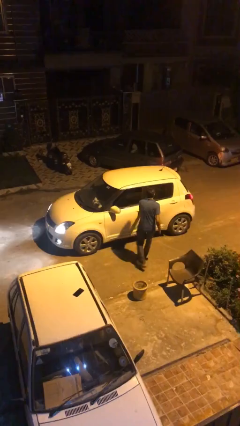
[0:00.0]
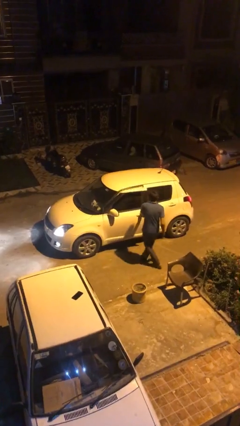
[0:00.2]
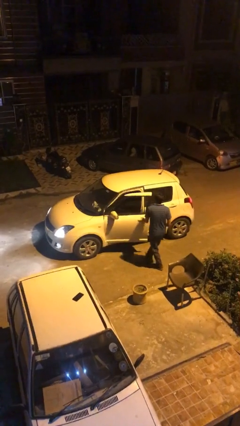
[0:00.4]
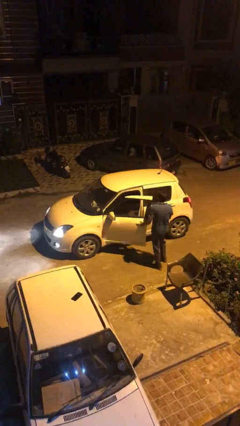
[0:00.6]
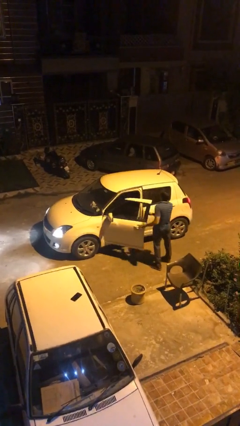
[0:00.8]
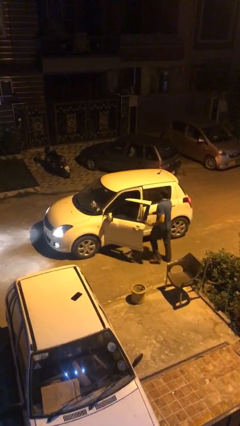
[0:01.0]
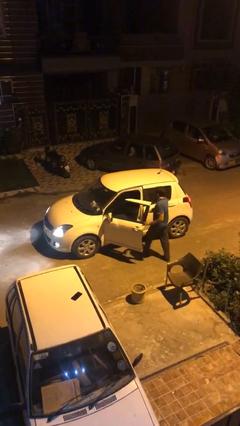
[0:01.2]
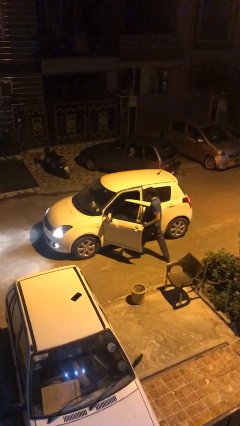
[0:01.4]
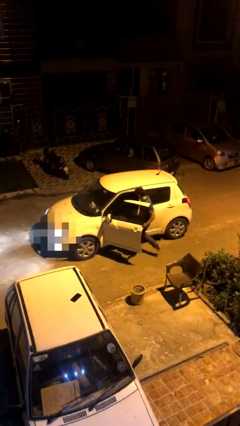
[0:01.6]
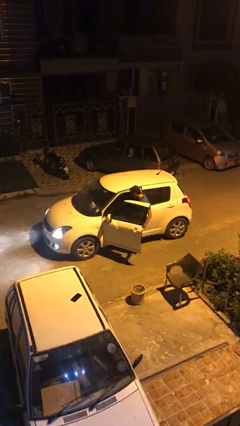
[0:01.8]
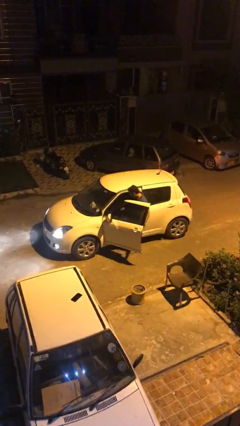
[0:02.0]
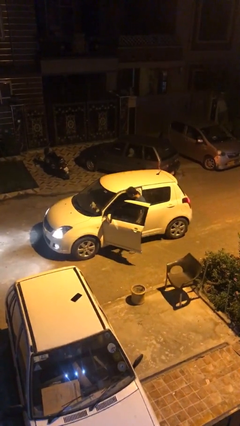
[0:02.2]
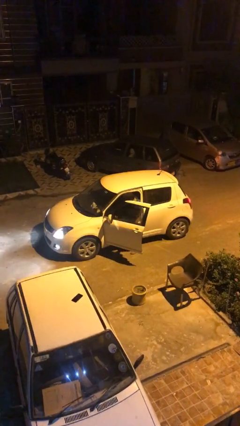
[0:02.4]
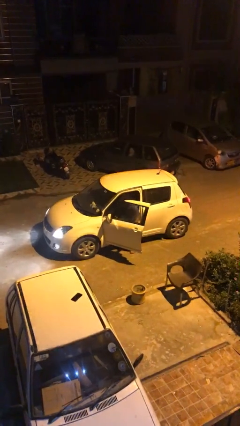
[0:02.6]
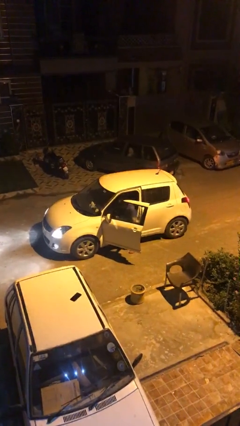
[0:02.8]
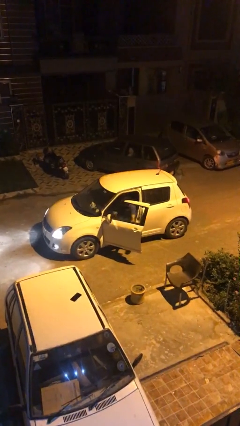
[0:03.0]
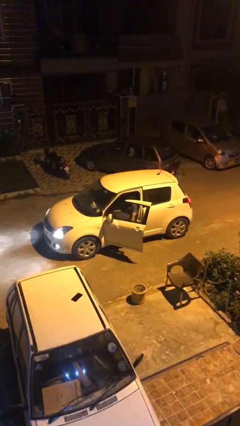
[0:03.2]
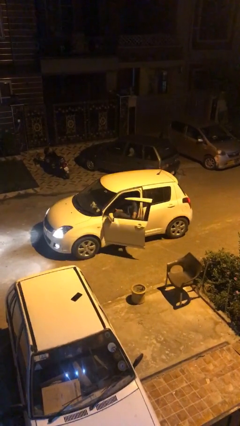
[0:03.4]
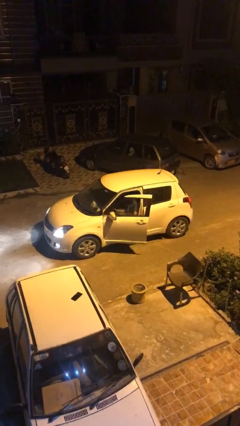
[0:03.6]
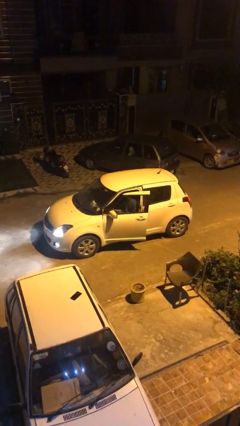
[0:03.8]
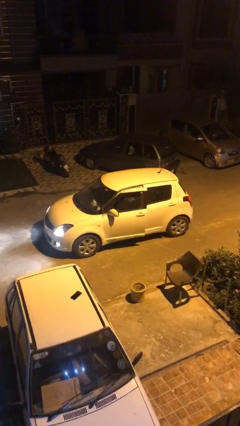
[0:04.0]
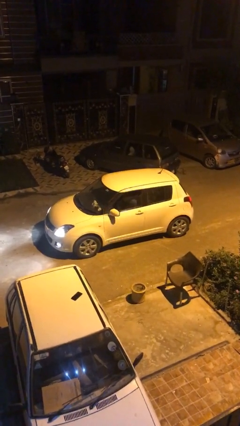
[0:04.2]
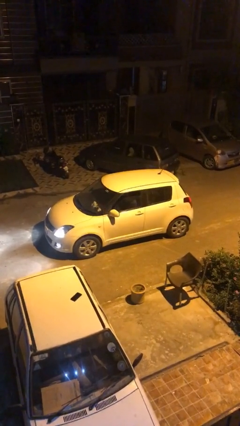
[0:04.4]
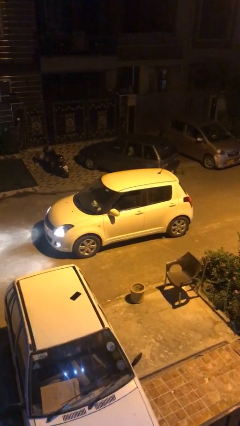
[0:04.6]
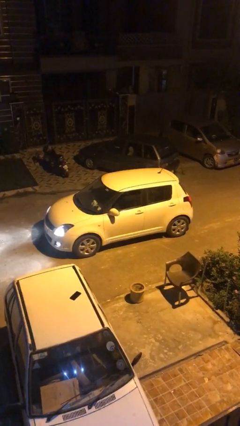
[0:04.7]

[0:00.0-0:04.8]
car picks up person

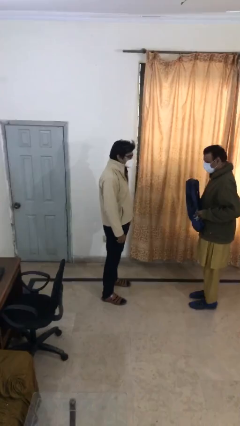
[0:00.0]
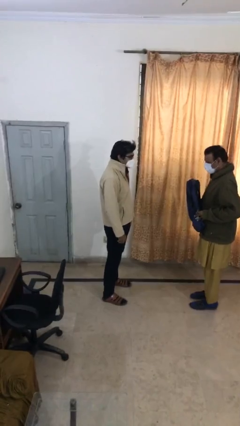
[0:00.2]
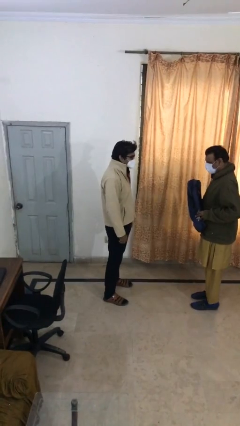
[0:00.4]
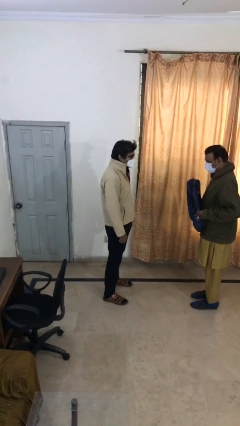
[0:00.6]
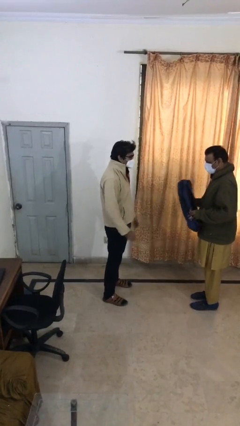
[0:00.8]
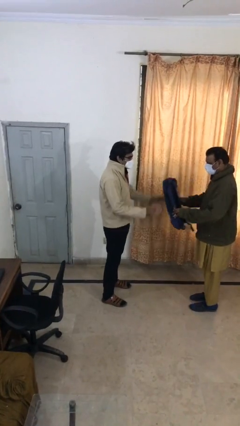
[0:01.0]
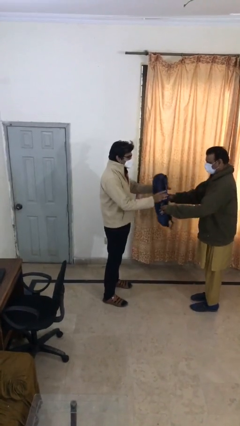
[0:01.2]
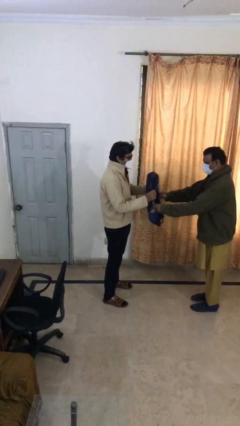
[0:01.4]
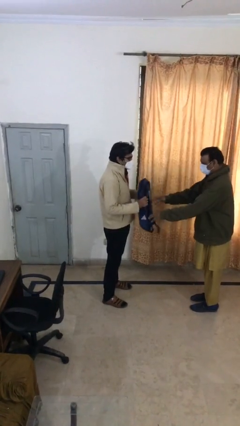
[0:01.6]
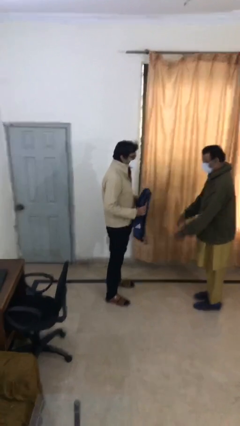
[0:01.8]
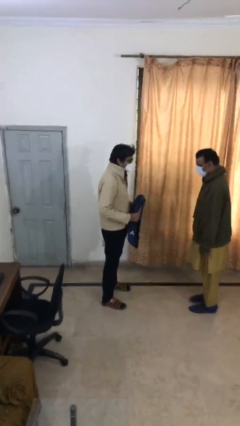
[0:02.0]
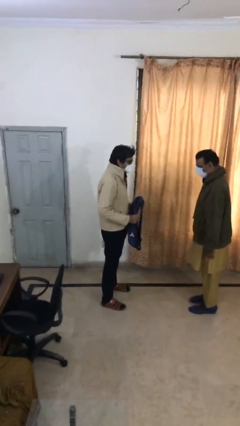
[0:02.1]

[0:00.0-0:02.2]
person transfers object to person

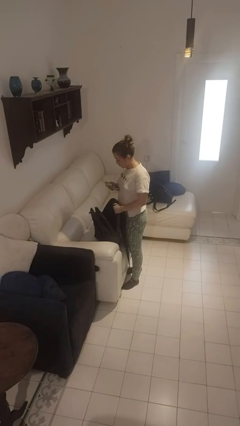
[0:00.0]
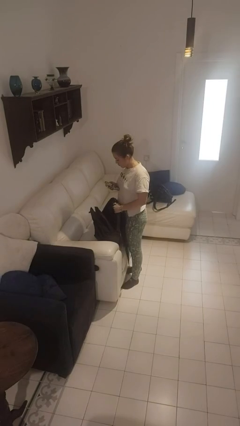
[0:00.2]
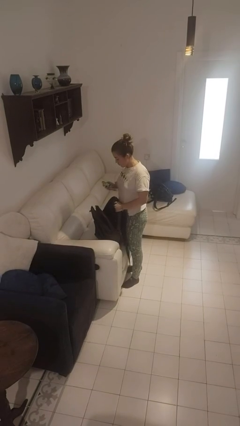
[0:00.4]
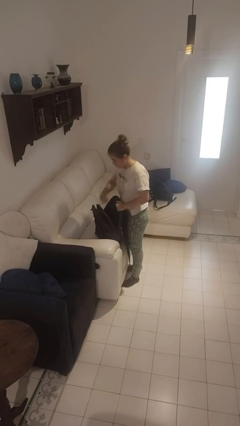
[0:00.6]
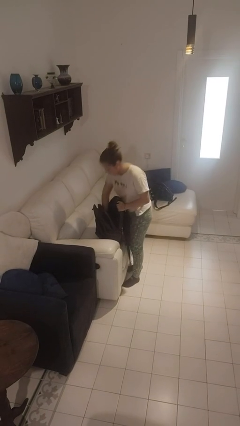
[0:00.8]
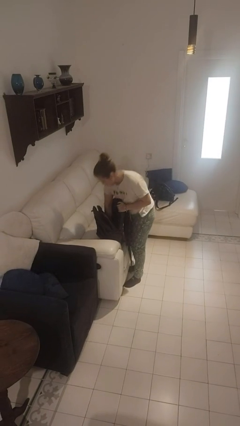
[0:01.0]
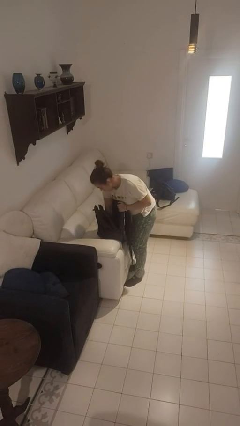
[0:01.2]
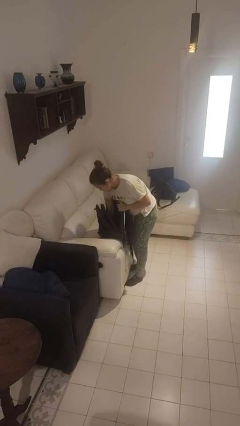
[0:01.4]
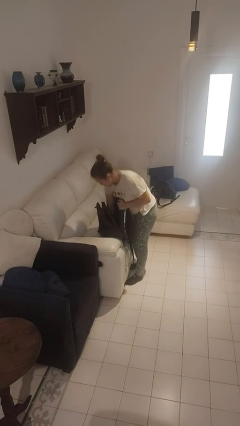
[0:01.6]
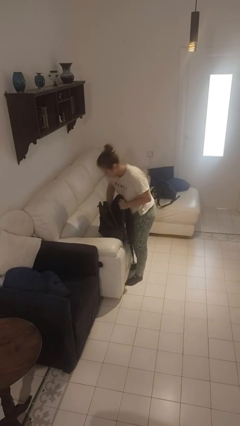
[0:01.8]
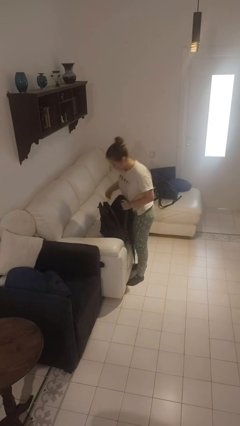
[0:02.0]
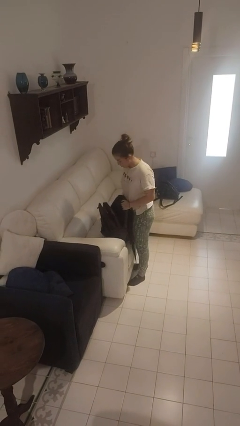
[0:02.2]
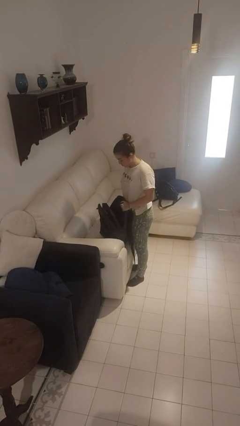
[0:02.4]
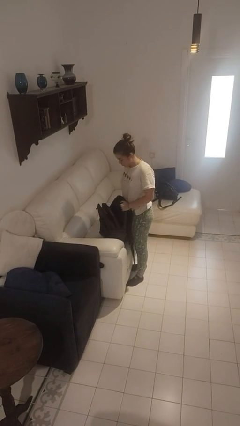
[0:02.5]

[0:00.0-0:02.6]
person puts object into backpack

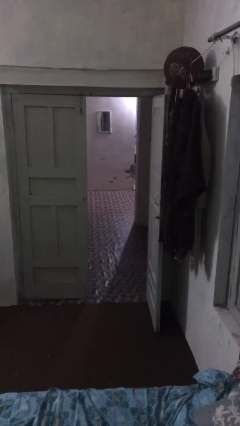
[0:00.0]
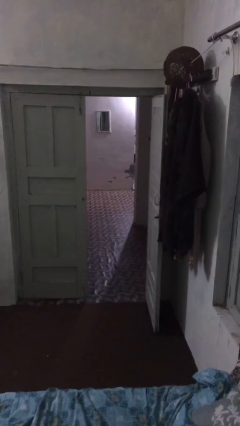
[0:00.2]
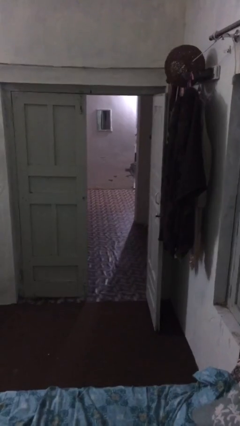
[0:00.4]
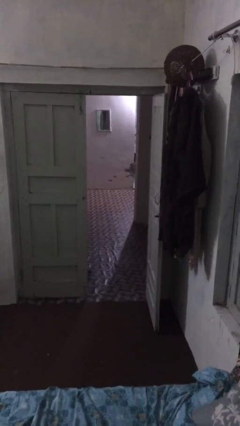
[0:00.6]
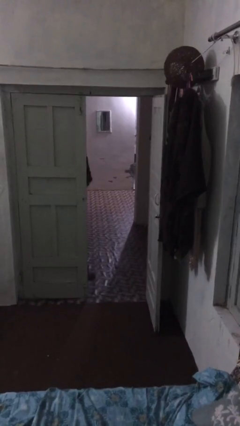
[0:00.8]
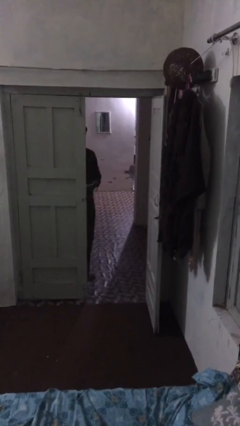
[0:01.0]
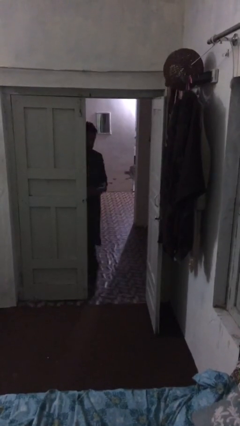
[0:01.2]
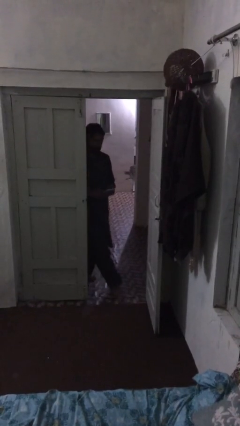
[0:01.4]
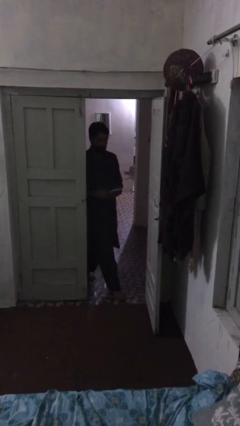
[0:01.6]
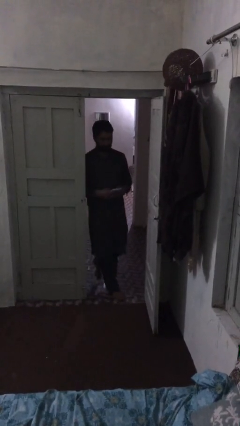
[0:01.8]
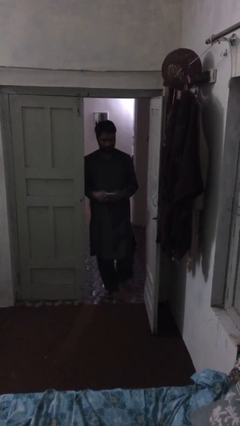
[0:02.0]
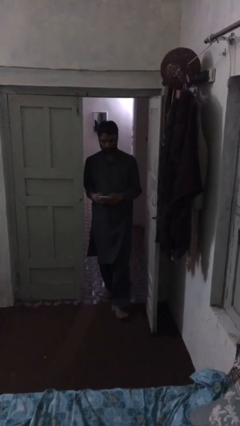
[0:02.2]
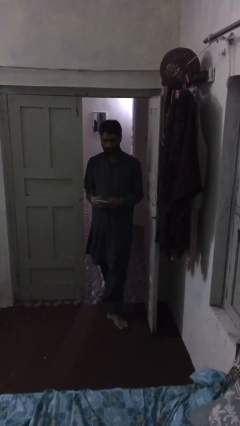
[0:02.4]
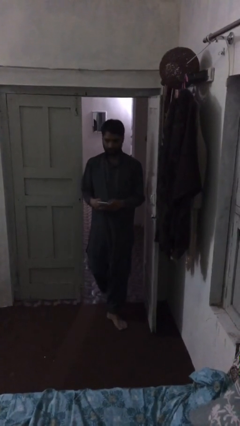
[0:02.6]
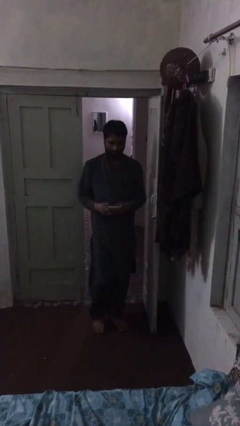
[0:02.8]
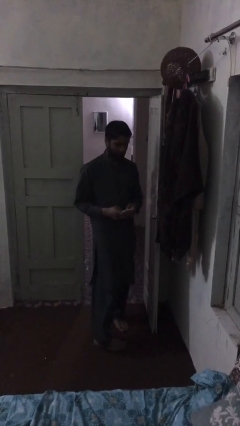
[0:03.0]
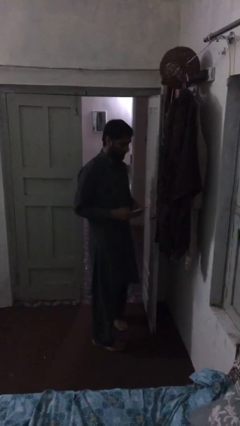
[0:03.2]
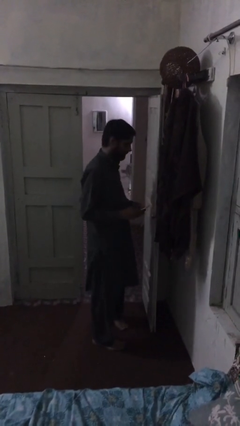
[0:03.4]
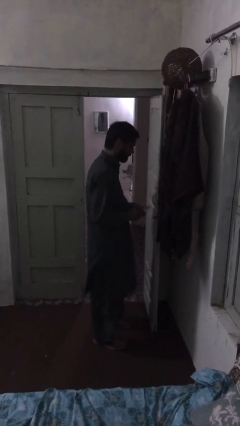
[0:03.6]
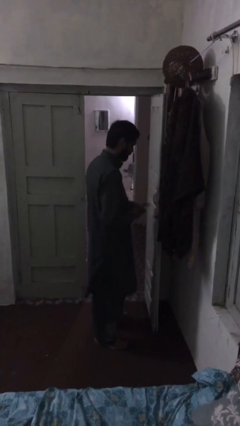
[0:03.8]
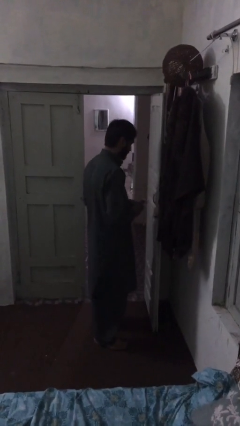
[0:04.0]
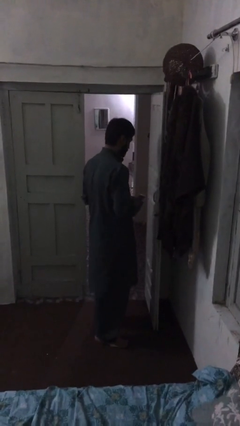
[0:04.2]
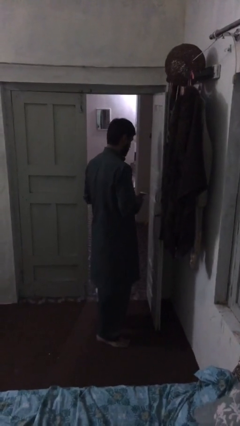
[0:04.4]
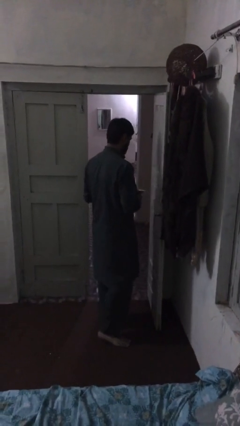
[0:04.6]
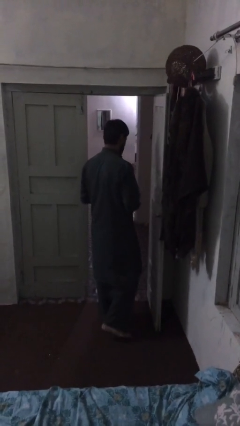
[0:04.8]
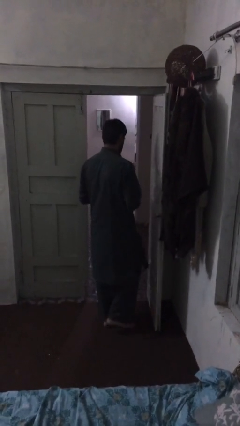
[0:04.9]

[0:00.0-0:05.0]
person enters scene through structure

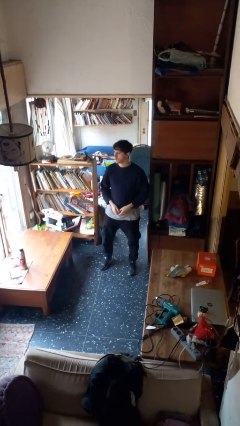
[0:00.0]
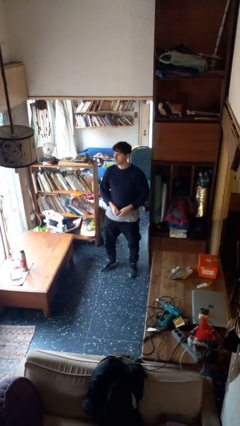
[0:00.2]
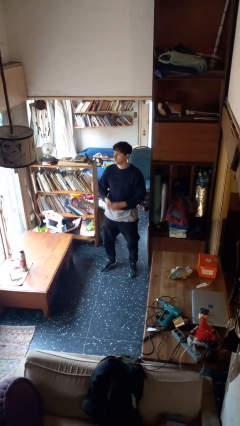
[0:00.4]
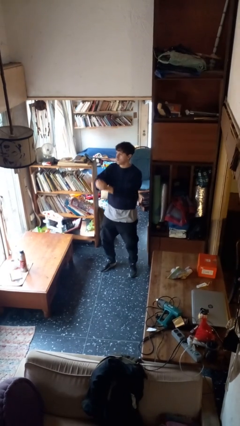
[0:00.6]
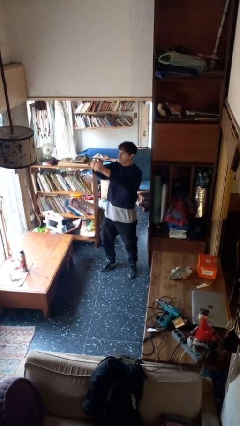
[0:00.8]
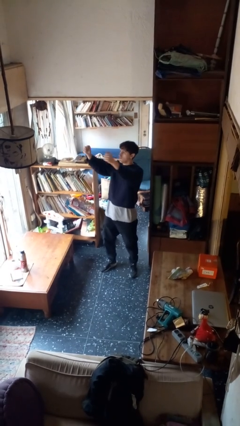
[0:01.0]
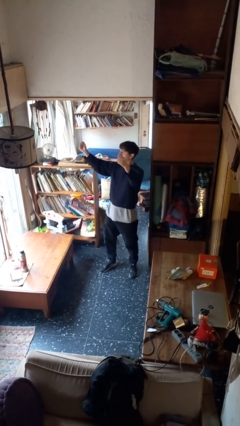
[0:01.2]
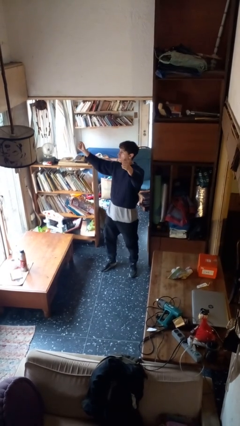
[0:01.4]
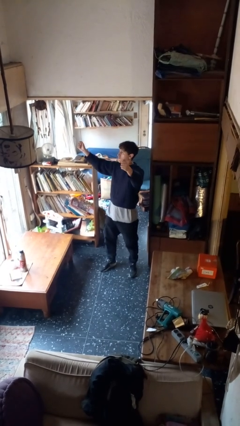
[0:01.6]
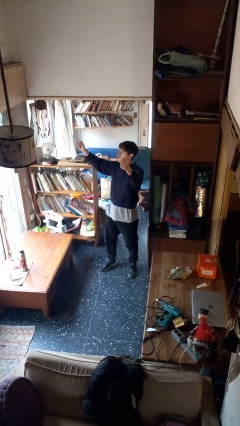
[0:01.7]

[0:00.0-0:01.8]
person gestures zoom in

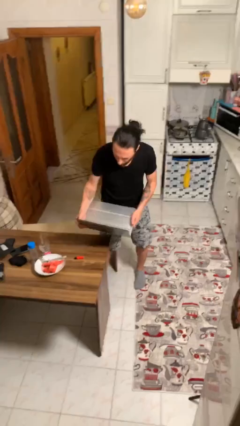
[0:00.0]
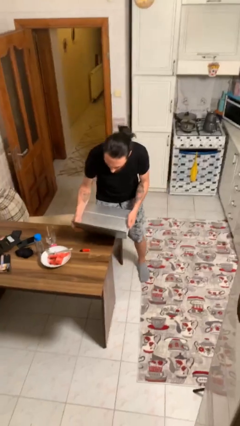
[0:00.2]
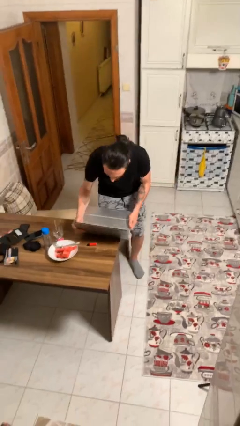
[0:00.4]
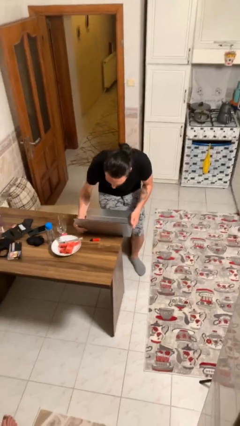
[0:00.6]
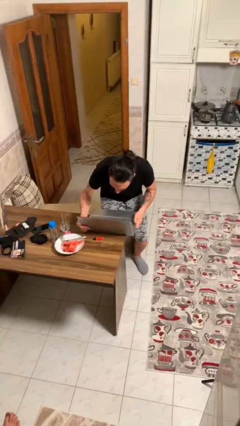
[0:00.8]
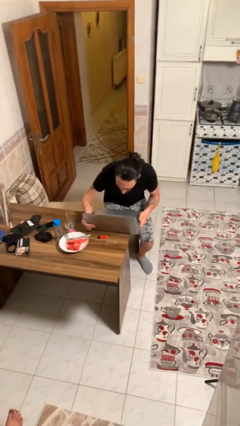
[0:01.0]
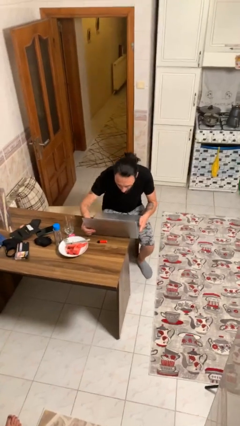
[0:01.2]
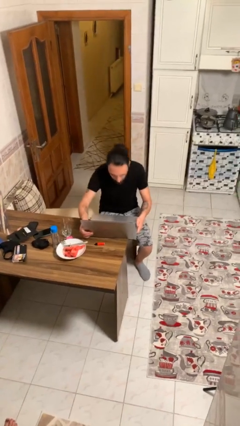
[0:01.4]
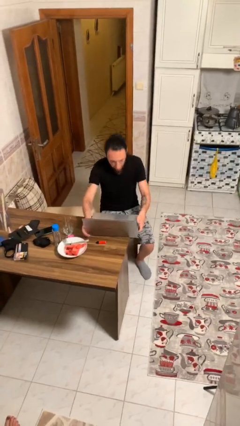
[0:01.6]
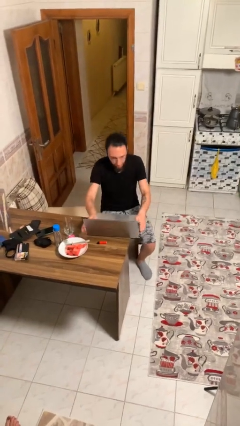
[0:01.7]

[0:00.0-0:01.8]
person sits down
